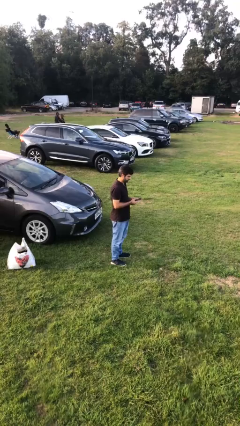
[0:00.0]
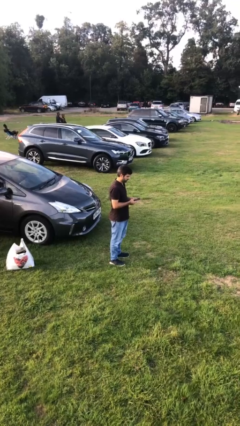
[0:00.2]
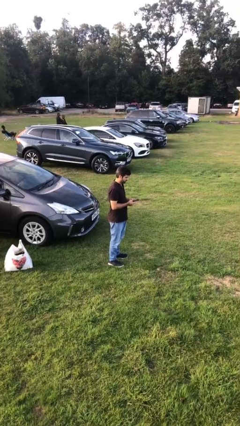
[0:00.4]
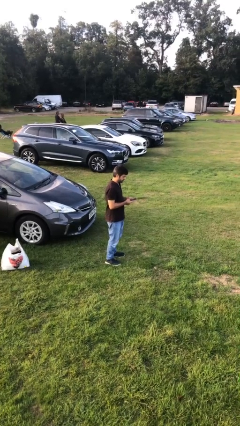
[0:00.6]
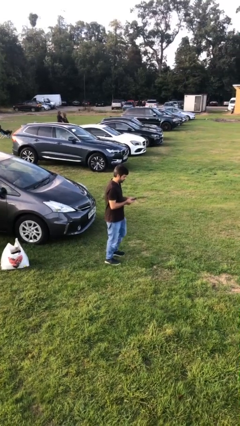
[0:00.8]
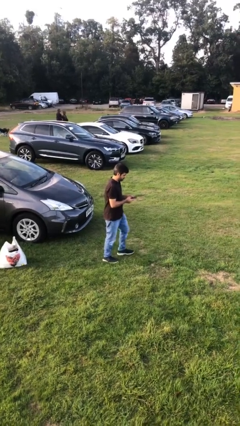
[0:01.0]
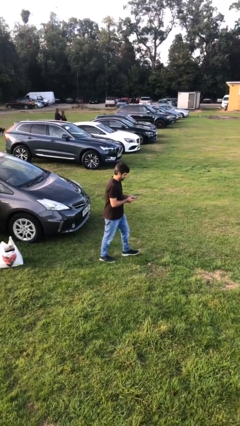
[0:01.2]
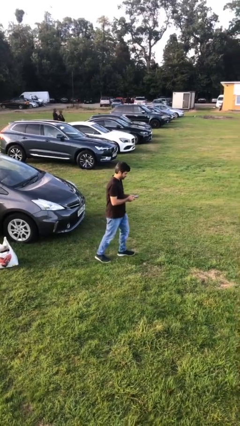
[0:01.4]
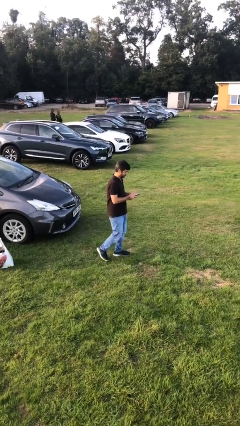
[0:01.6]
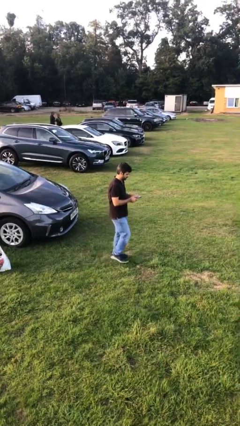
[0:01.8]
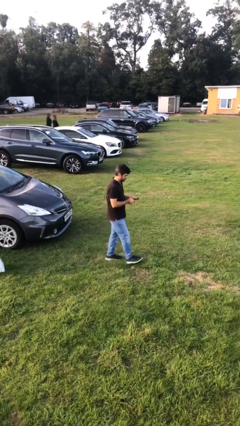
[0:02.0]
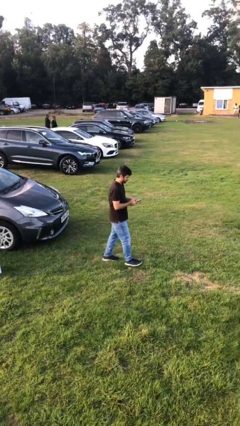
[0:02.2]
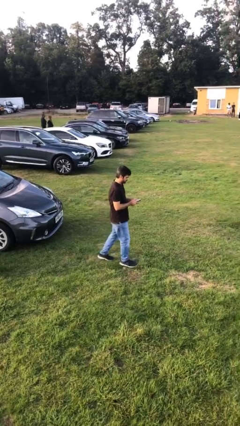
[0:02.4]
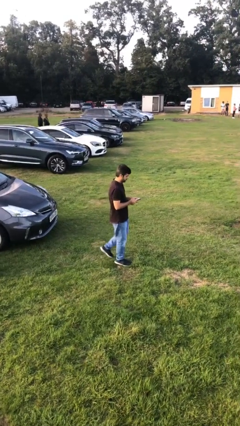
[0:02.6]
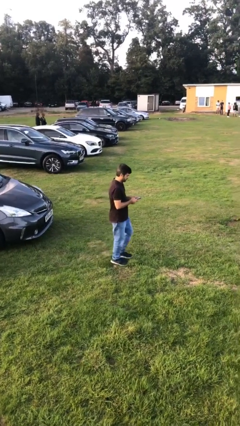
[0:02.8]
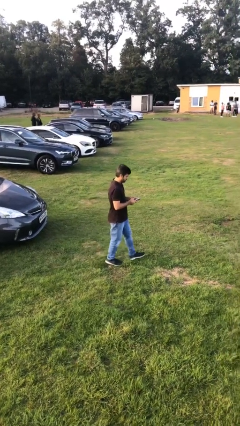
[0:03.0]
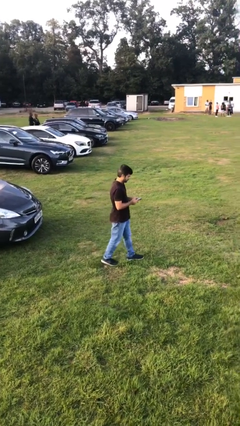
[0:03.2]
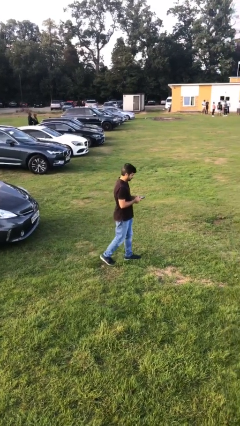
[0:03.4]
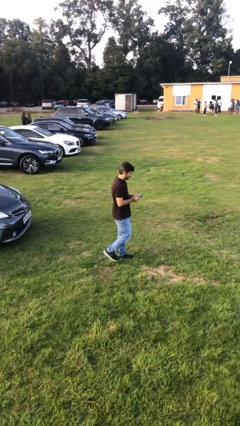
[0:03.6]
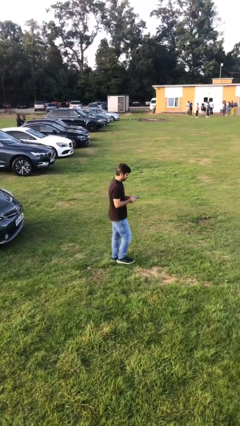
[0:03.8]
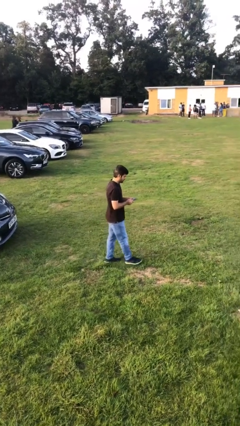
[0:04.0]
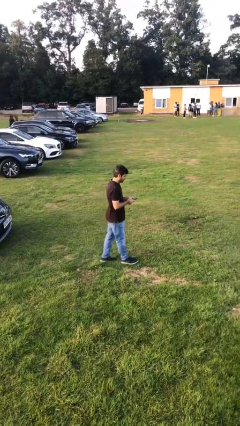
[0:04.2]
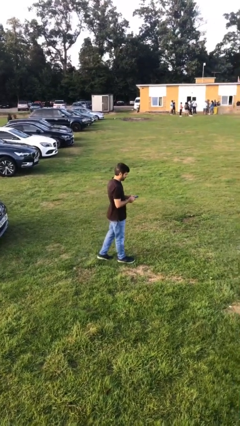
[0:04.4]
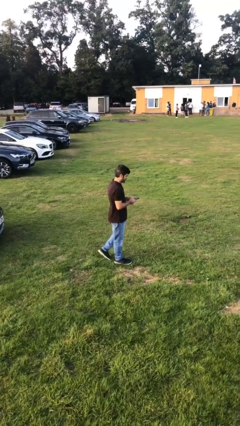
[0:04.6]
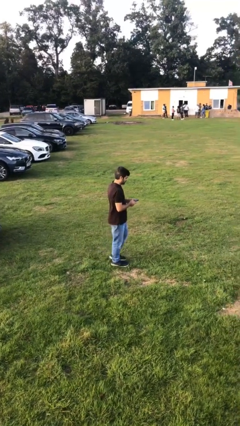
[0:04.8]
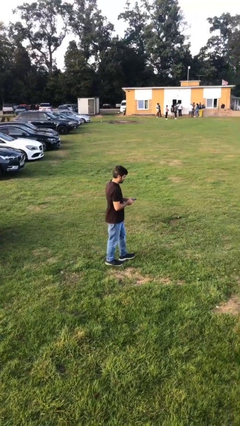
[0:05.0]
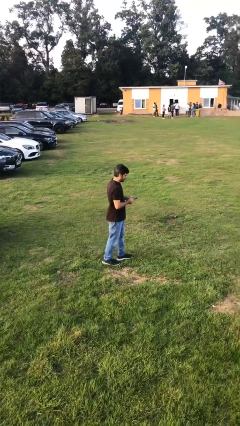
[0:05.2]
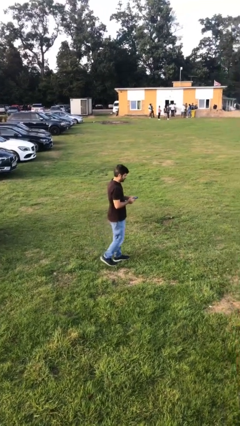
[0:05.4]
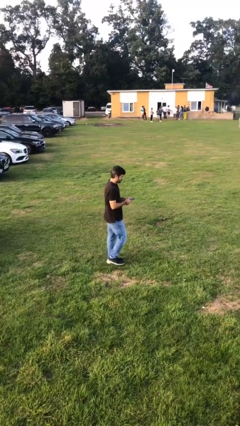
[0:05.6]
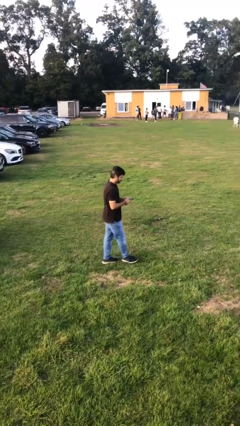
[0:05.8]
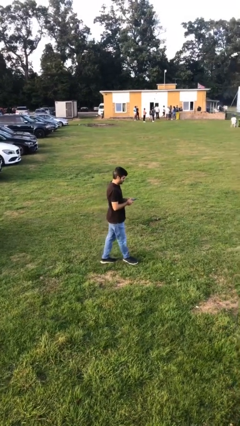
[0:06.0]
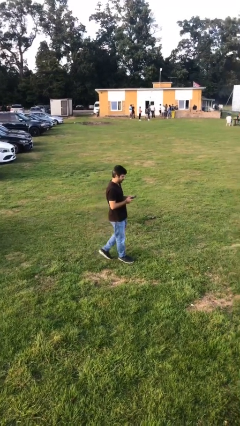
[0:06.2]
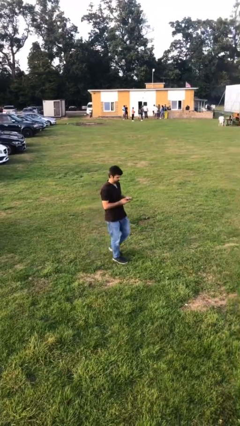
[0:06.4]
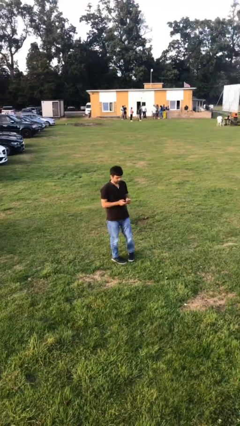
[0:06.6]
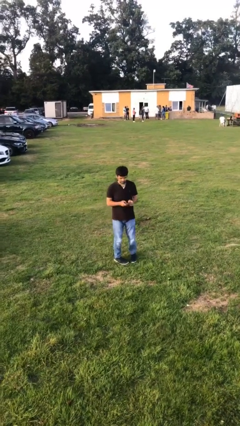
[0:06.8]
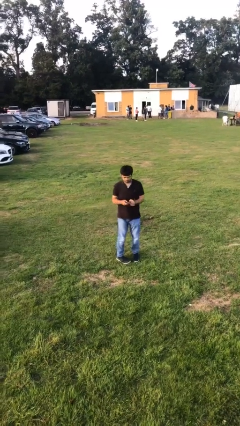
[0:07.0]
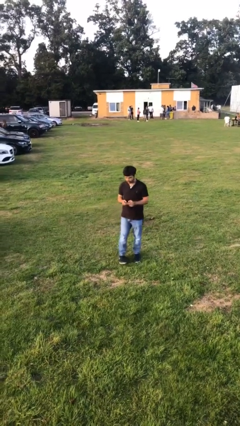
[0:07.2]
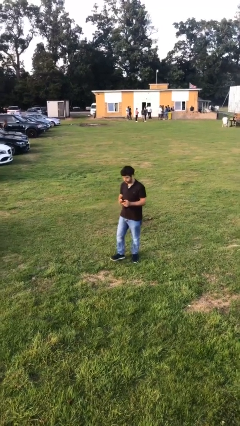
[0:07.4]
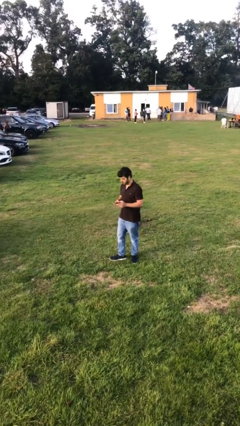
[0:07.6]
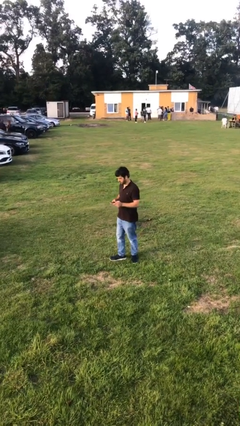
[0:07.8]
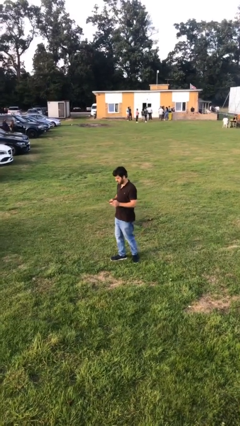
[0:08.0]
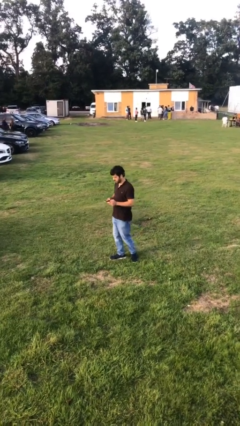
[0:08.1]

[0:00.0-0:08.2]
person texts on phone

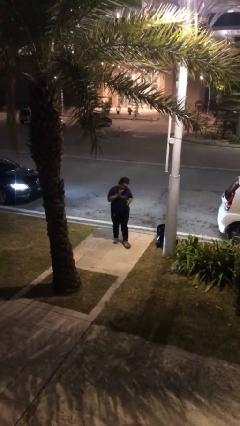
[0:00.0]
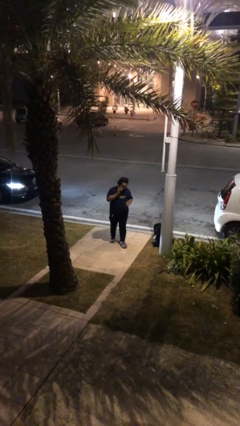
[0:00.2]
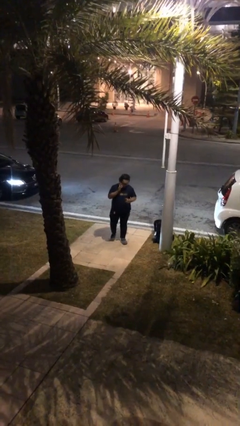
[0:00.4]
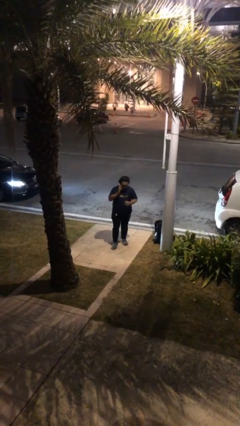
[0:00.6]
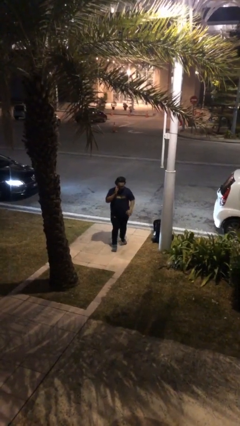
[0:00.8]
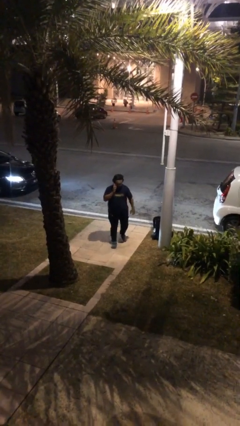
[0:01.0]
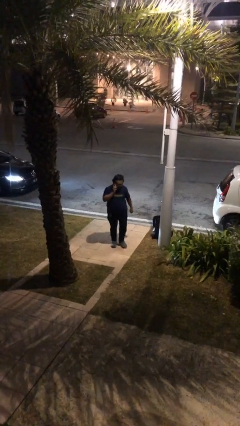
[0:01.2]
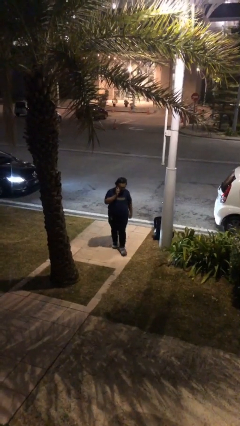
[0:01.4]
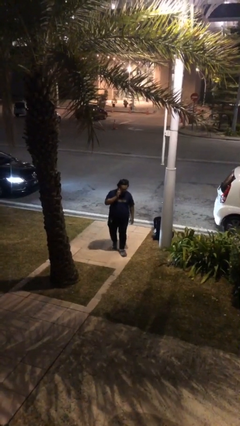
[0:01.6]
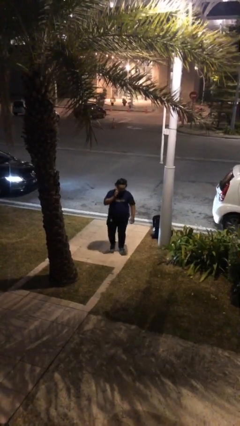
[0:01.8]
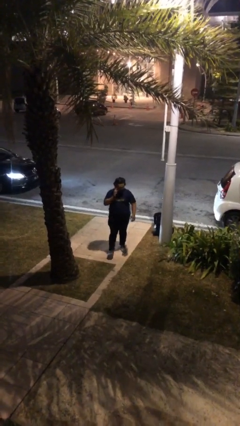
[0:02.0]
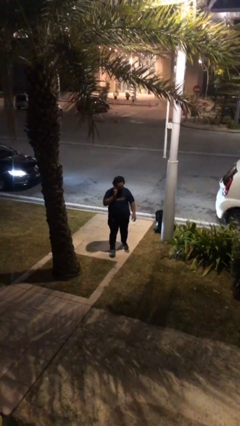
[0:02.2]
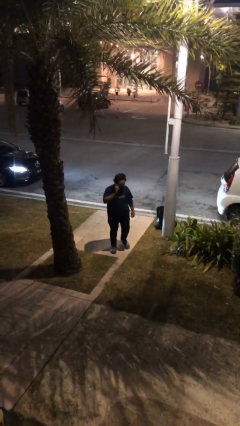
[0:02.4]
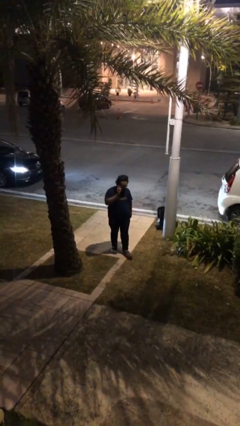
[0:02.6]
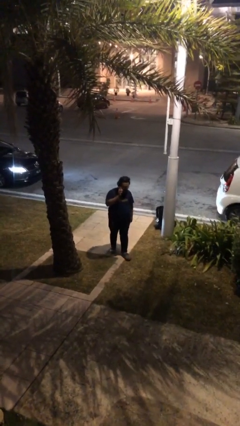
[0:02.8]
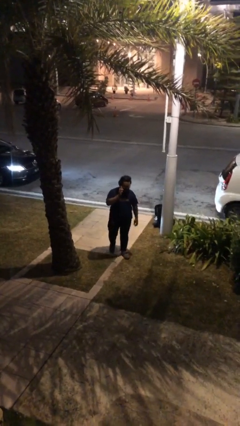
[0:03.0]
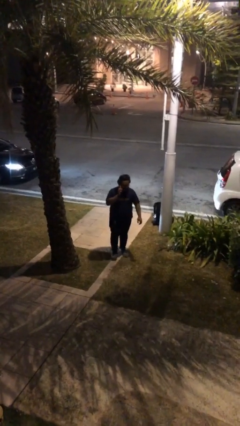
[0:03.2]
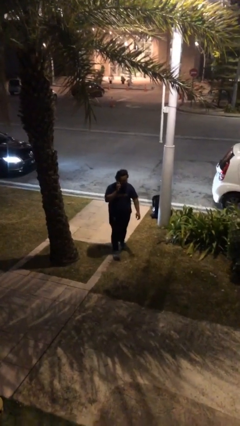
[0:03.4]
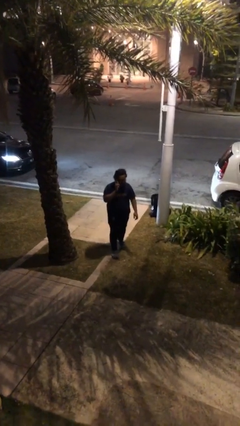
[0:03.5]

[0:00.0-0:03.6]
person talks on phone

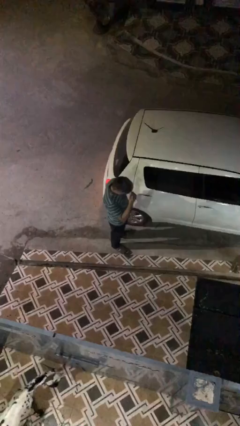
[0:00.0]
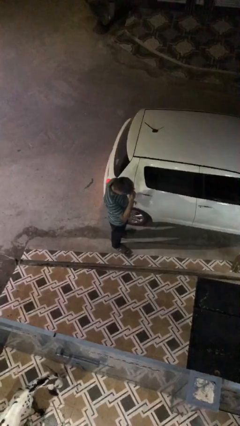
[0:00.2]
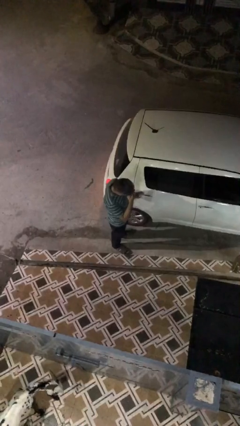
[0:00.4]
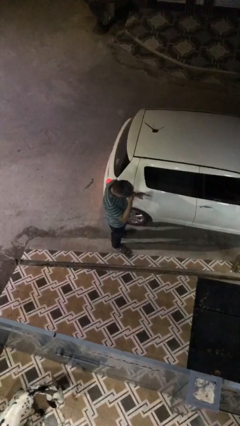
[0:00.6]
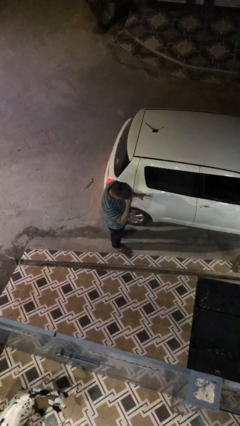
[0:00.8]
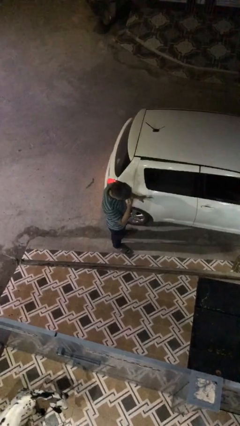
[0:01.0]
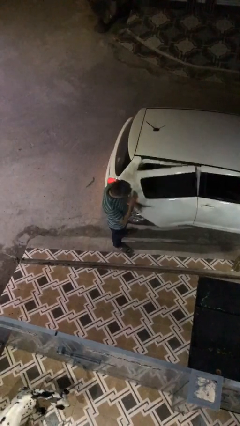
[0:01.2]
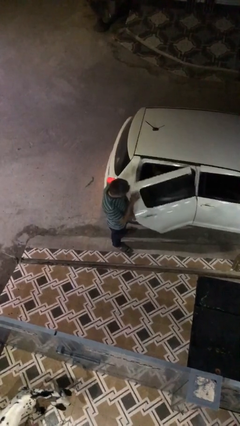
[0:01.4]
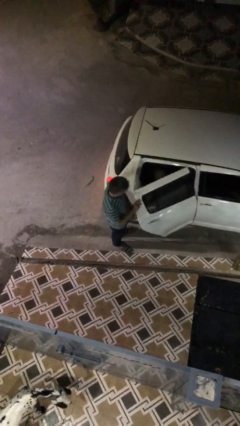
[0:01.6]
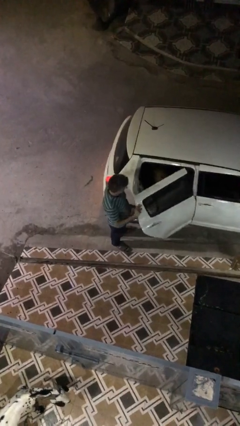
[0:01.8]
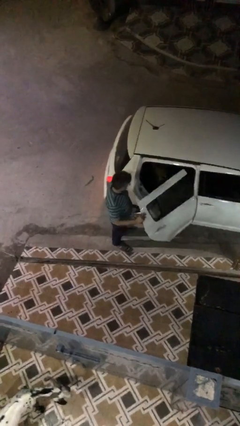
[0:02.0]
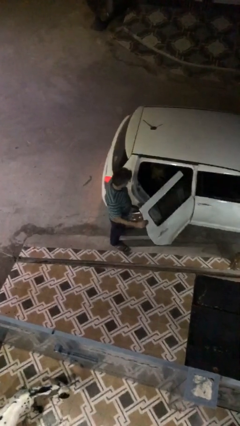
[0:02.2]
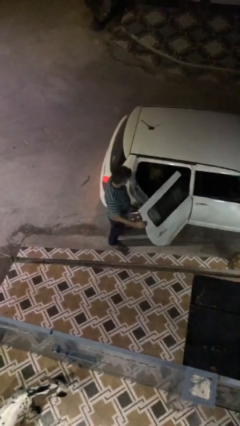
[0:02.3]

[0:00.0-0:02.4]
person opens car door

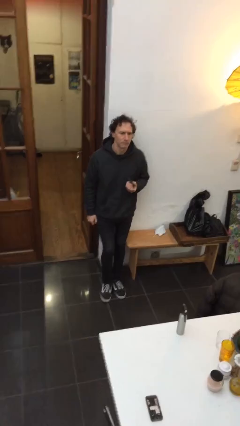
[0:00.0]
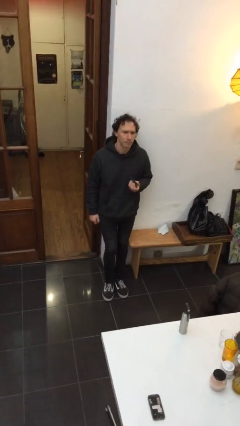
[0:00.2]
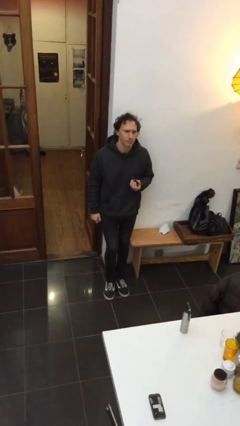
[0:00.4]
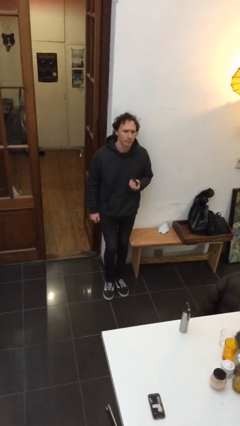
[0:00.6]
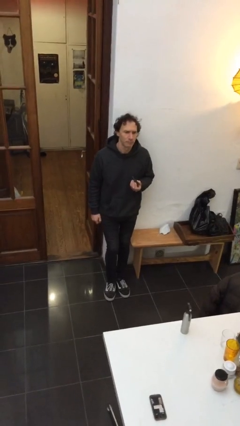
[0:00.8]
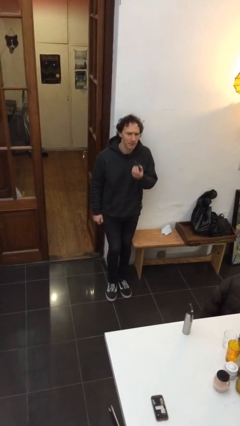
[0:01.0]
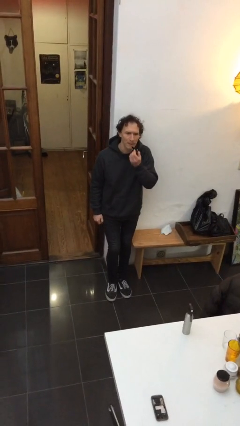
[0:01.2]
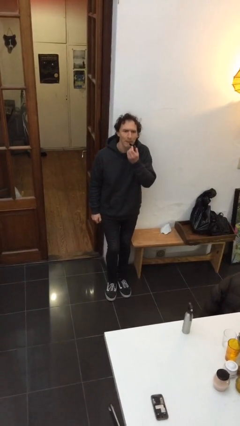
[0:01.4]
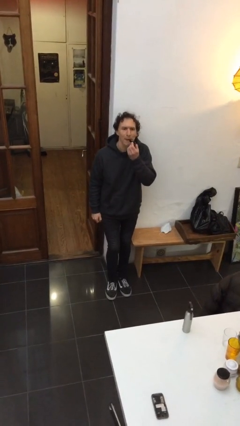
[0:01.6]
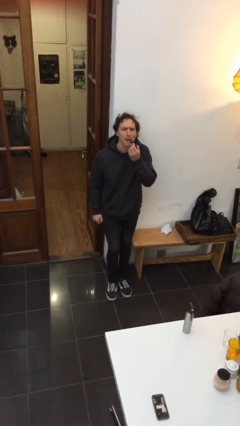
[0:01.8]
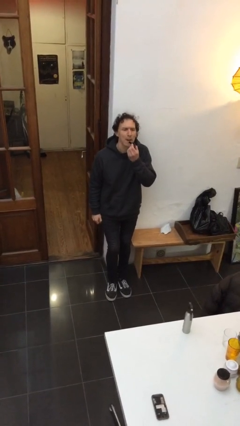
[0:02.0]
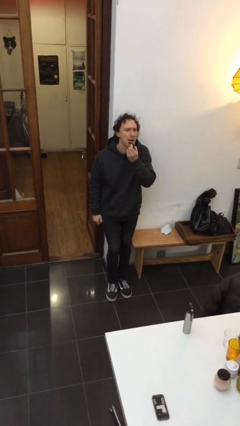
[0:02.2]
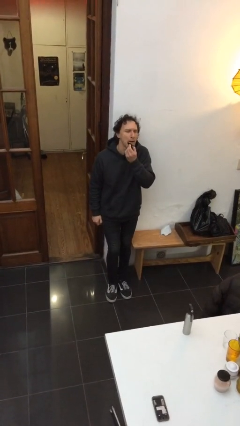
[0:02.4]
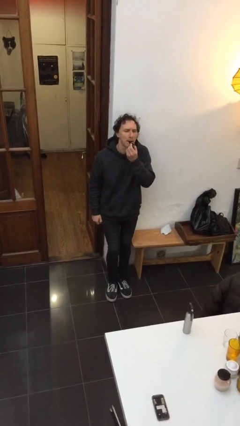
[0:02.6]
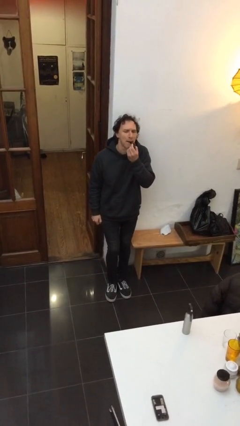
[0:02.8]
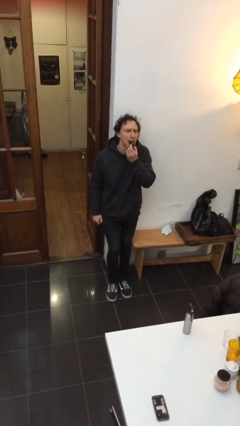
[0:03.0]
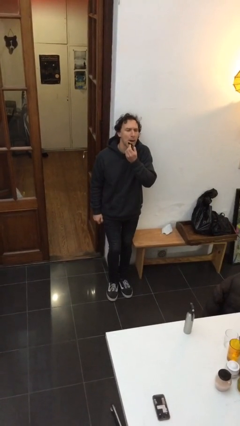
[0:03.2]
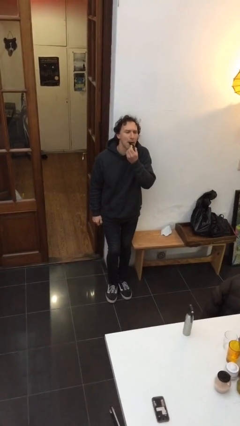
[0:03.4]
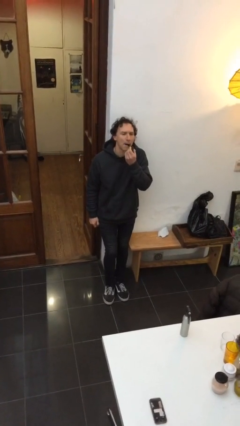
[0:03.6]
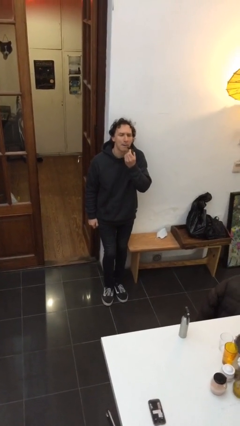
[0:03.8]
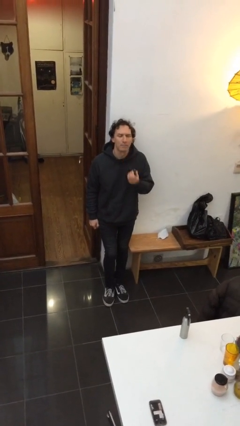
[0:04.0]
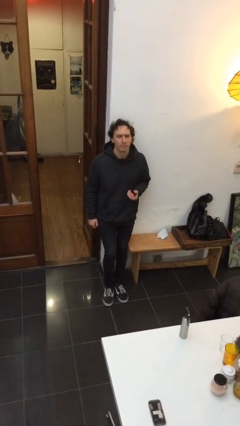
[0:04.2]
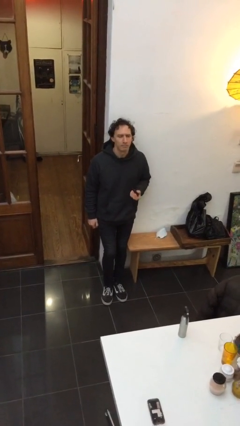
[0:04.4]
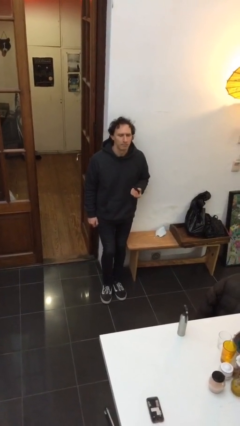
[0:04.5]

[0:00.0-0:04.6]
person applies lip makeup
